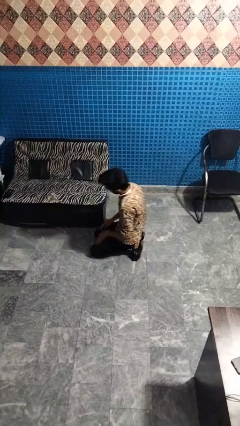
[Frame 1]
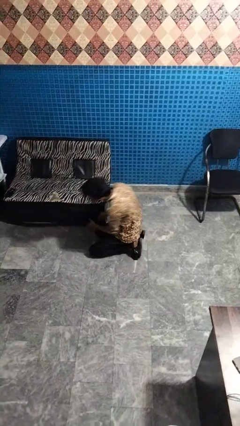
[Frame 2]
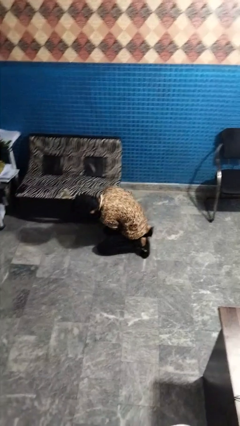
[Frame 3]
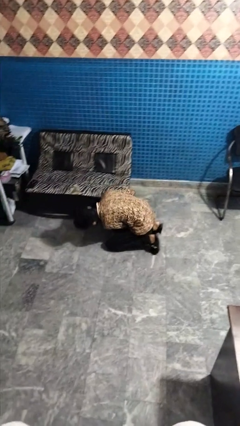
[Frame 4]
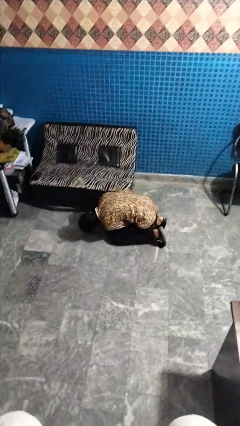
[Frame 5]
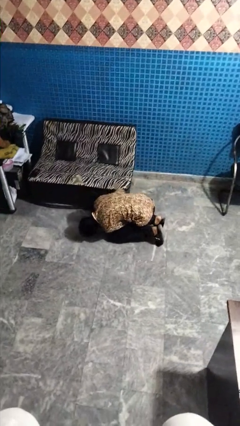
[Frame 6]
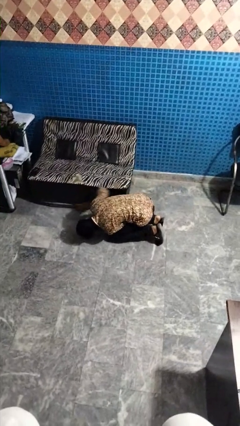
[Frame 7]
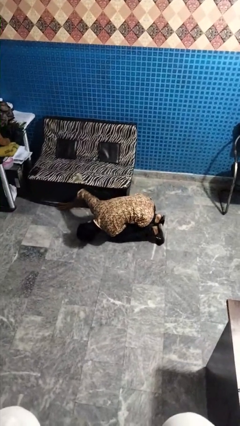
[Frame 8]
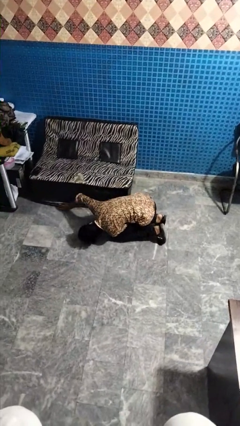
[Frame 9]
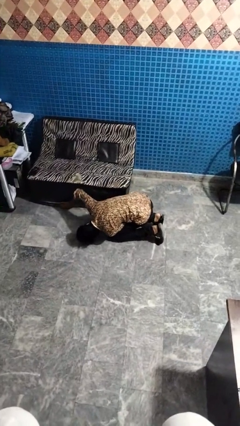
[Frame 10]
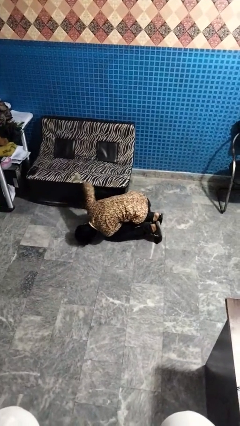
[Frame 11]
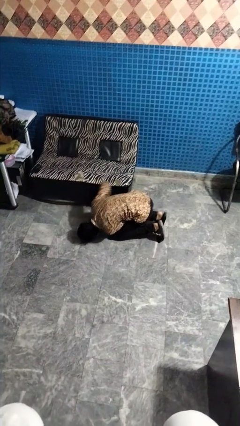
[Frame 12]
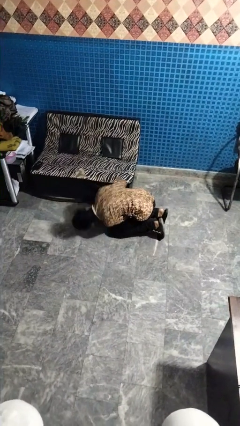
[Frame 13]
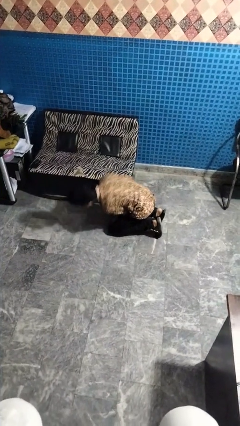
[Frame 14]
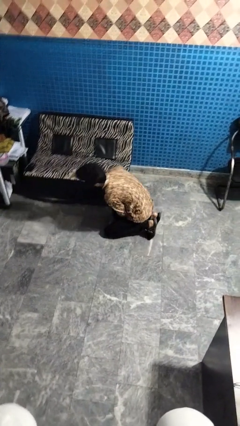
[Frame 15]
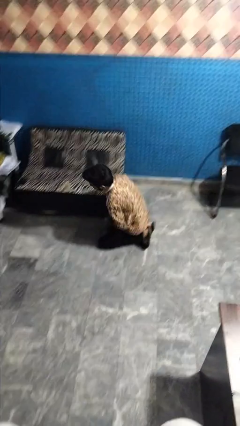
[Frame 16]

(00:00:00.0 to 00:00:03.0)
person searches under couch

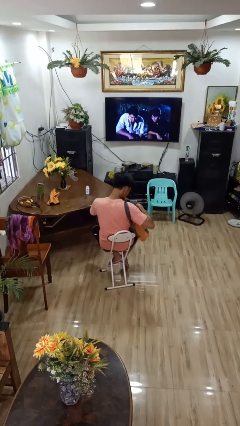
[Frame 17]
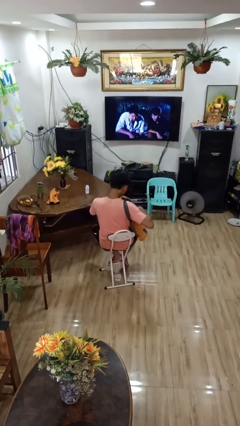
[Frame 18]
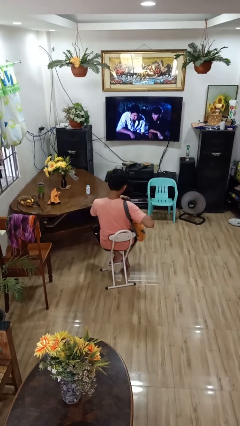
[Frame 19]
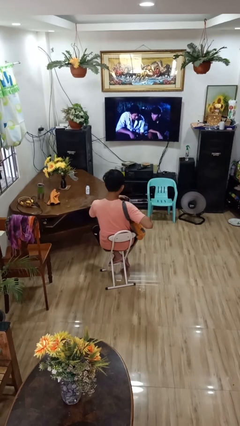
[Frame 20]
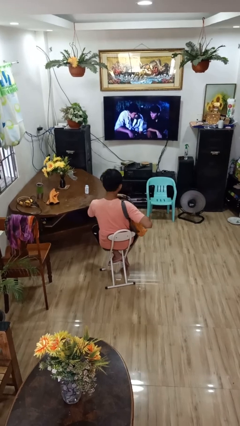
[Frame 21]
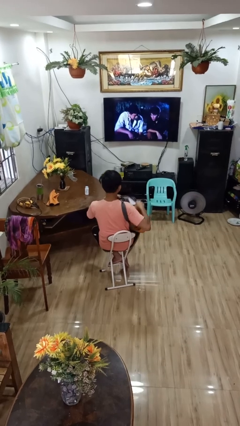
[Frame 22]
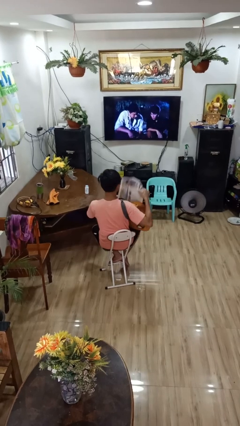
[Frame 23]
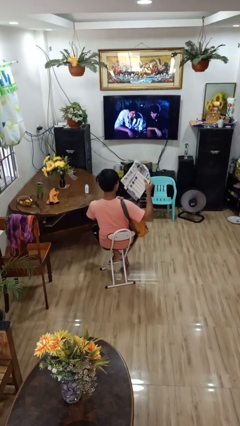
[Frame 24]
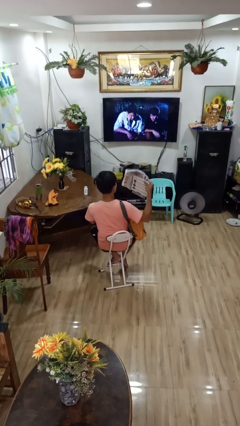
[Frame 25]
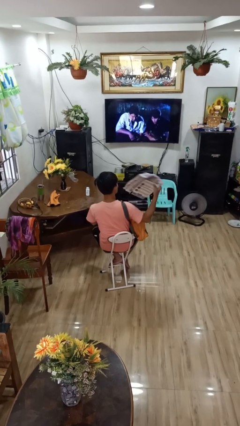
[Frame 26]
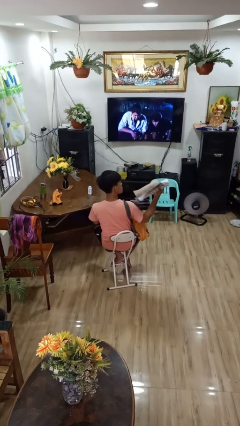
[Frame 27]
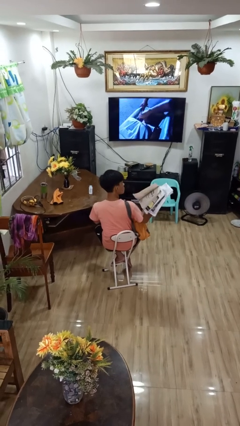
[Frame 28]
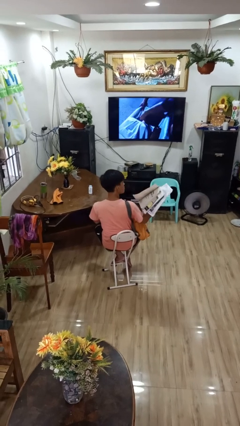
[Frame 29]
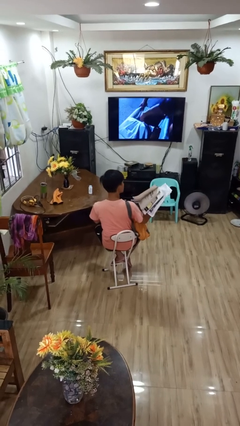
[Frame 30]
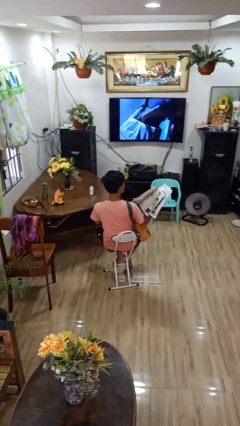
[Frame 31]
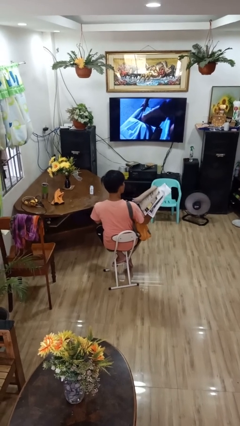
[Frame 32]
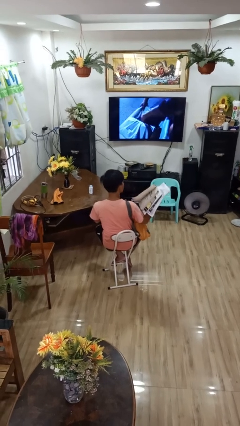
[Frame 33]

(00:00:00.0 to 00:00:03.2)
person takes object from backpack

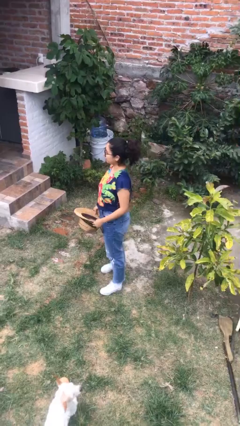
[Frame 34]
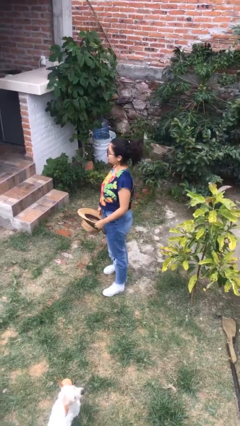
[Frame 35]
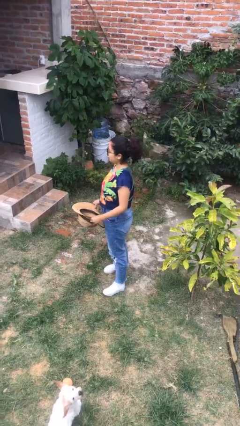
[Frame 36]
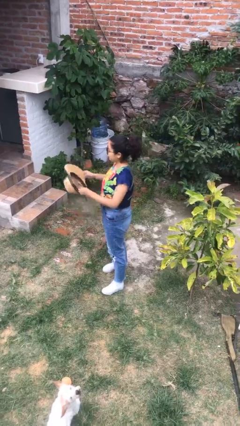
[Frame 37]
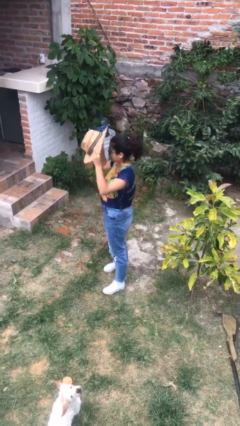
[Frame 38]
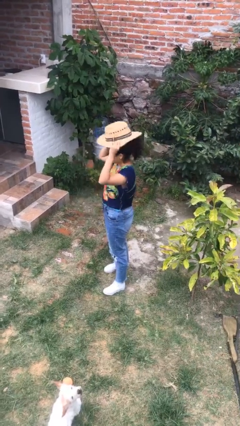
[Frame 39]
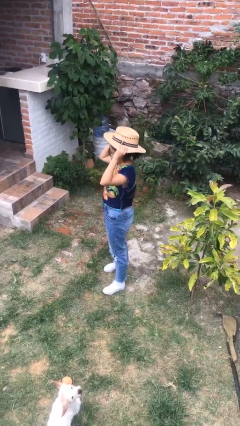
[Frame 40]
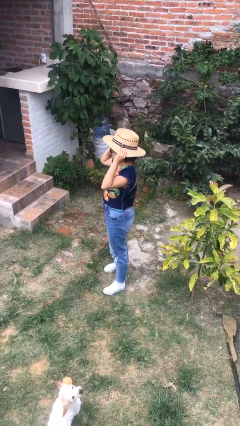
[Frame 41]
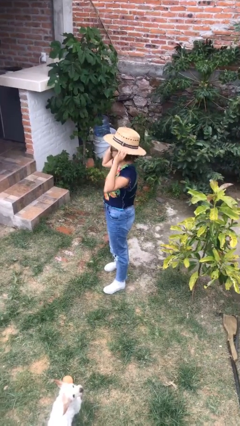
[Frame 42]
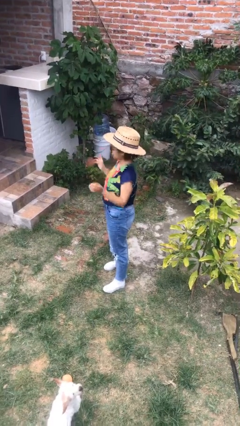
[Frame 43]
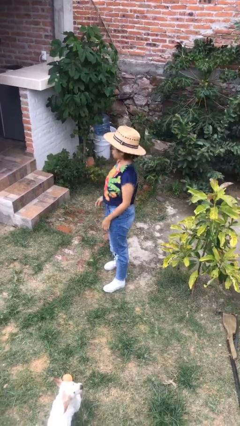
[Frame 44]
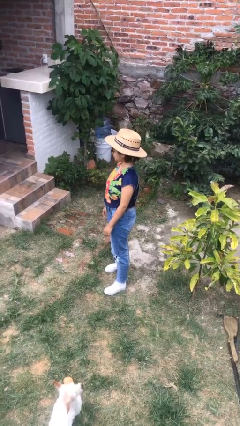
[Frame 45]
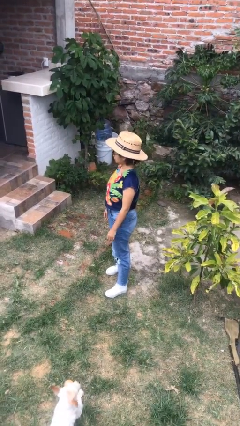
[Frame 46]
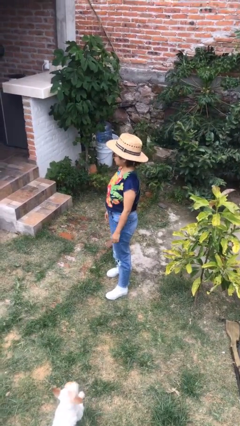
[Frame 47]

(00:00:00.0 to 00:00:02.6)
person puts on hat

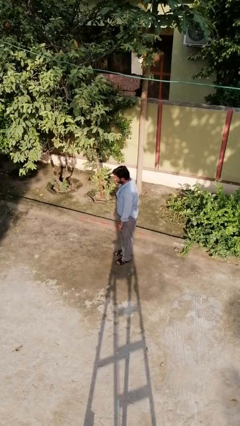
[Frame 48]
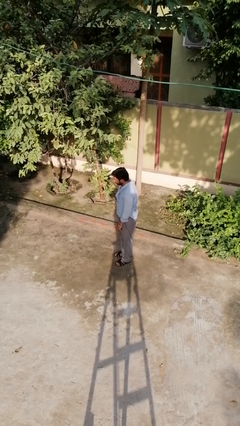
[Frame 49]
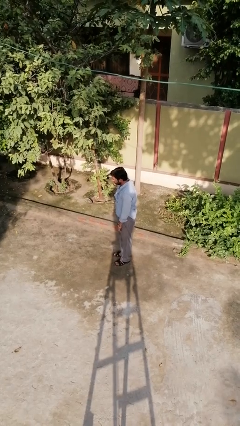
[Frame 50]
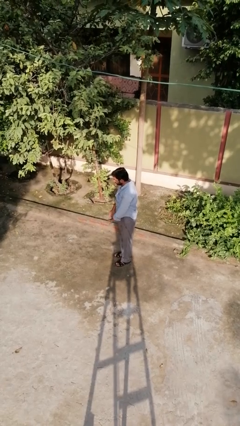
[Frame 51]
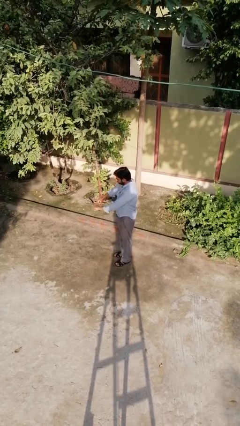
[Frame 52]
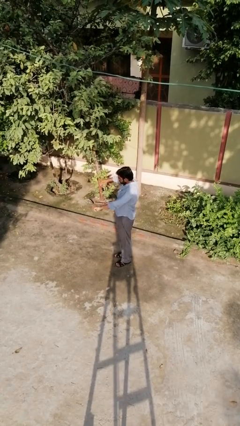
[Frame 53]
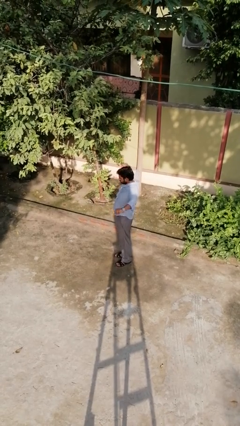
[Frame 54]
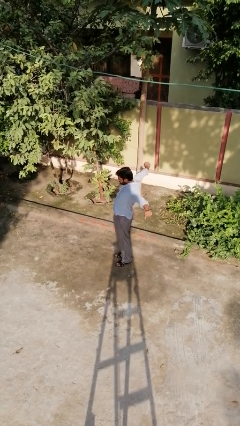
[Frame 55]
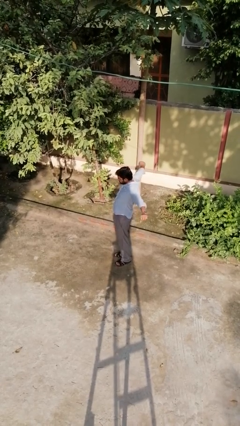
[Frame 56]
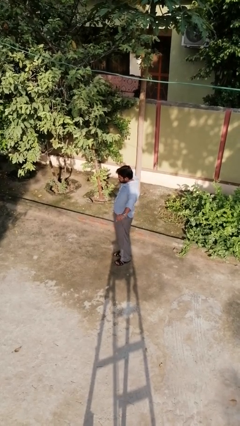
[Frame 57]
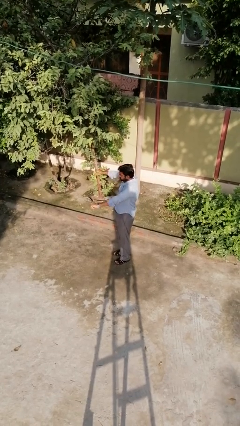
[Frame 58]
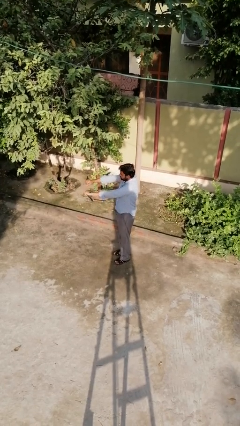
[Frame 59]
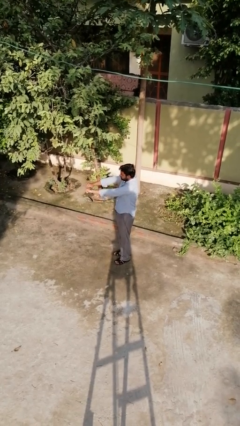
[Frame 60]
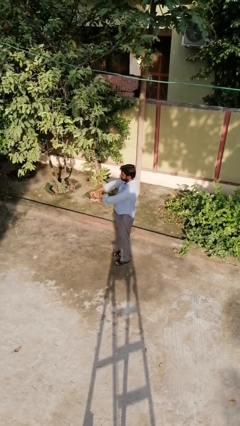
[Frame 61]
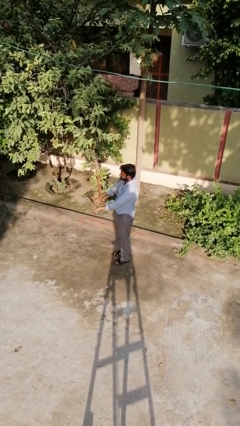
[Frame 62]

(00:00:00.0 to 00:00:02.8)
person stretches arms to side

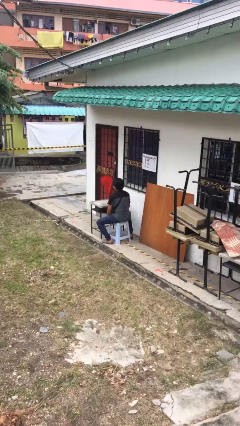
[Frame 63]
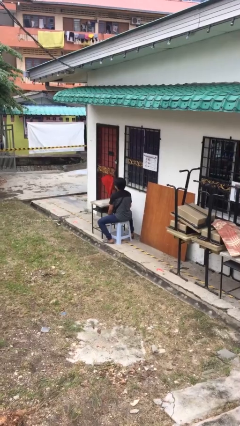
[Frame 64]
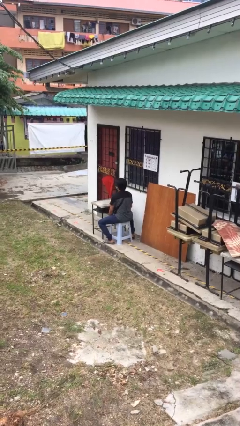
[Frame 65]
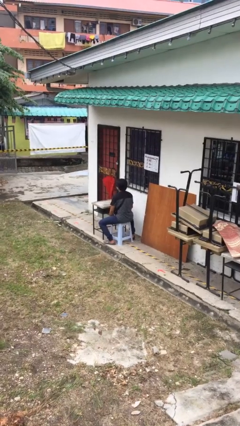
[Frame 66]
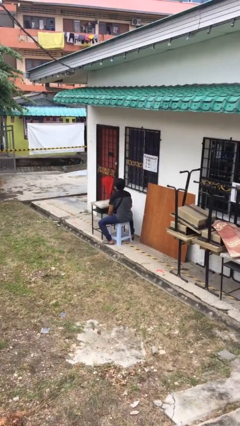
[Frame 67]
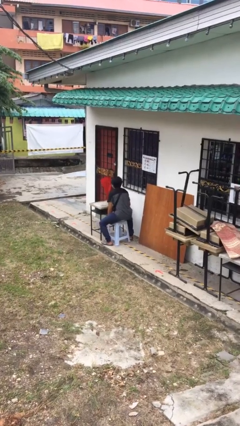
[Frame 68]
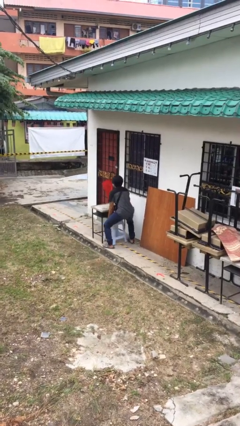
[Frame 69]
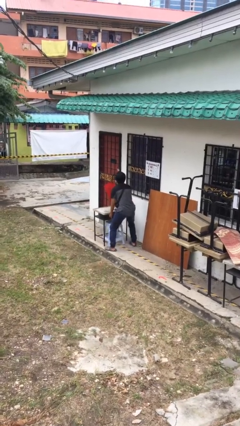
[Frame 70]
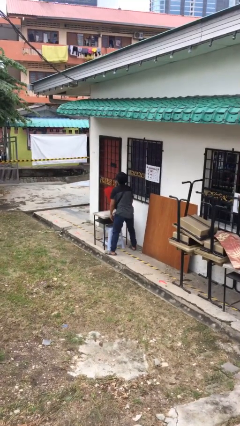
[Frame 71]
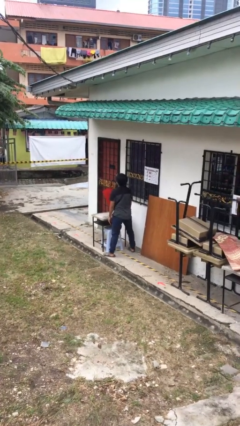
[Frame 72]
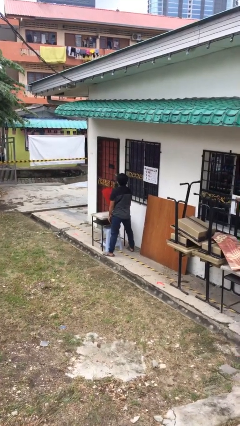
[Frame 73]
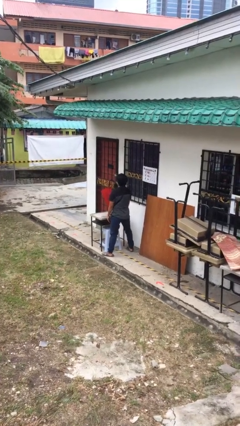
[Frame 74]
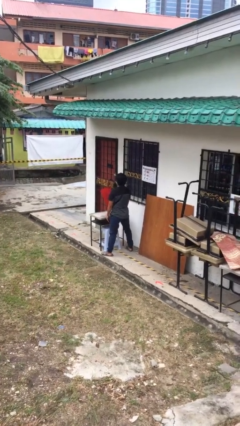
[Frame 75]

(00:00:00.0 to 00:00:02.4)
person stands up

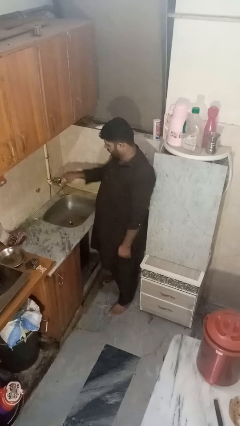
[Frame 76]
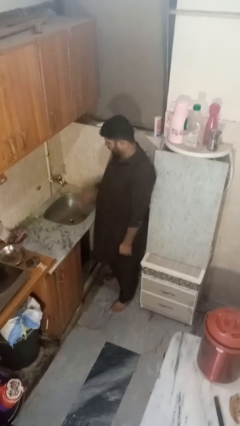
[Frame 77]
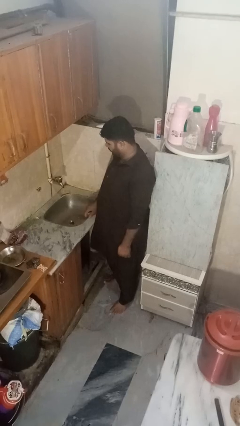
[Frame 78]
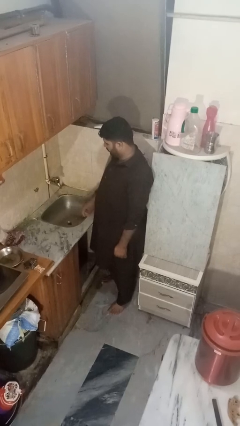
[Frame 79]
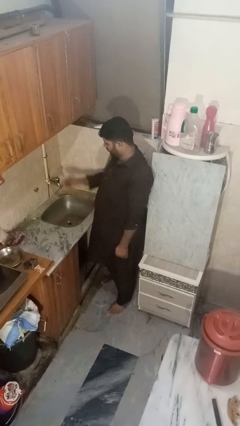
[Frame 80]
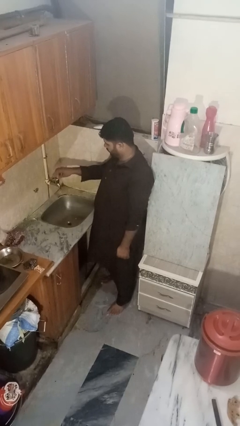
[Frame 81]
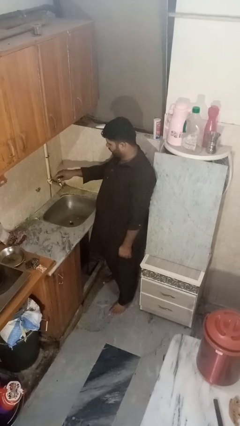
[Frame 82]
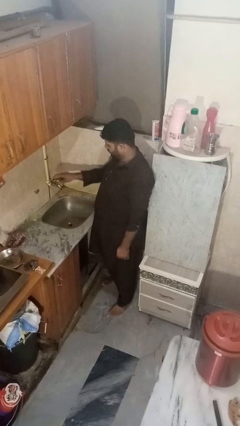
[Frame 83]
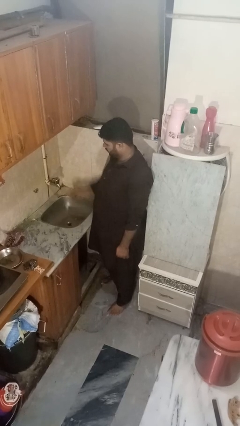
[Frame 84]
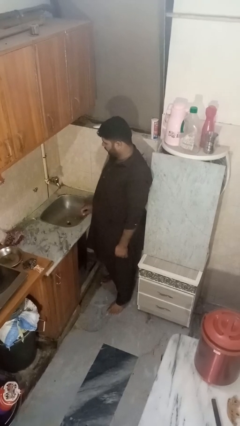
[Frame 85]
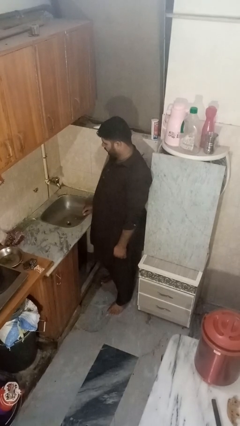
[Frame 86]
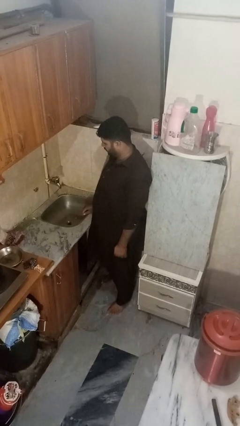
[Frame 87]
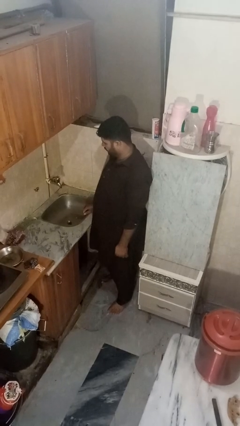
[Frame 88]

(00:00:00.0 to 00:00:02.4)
person turns off faucet

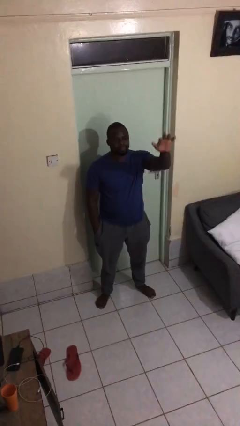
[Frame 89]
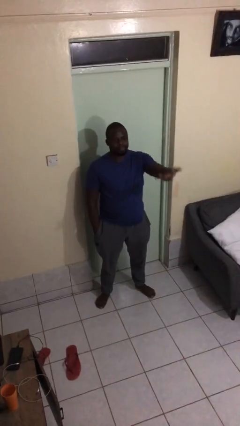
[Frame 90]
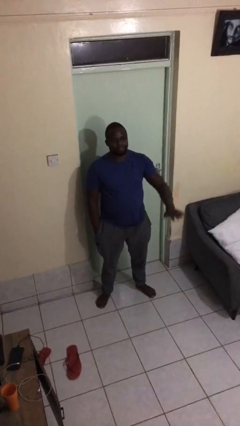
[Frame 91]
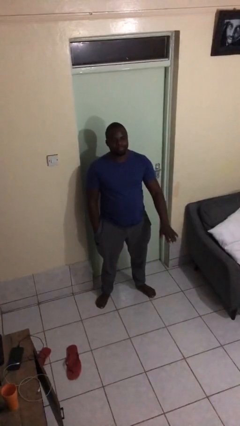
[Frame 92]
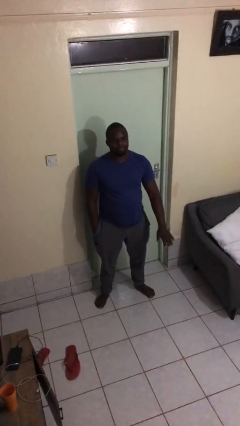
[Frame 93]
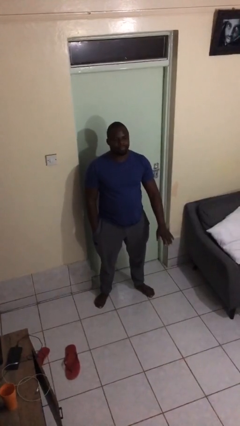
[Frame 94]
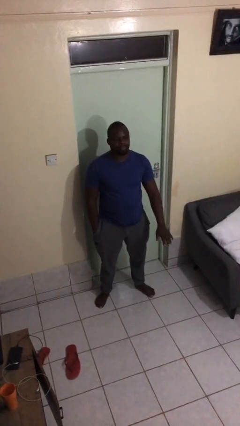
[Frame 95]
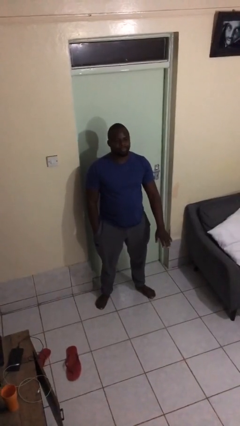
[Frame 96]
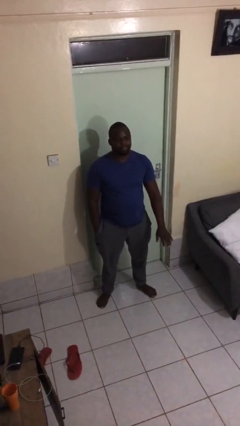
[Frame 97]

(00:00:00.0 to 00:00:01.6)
person gestures swipe down
